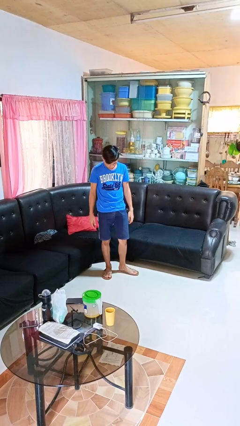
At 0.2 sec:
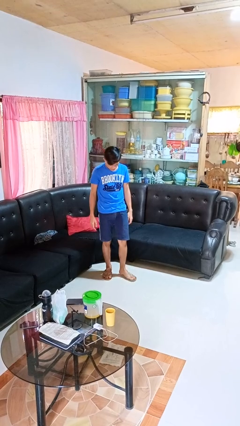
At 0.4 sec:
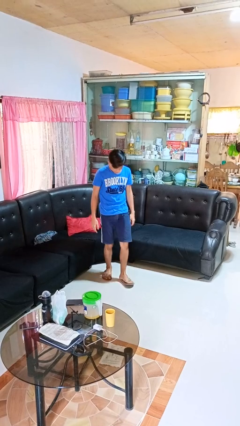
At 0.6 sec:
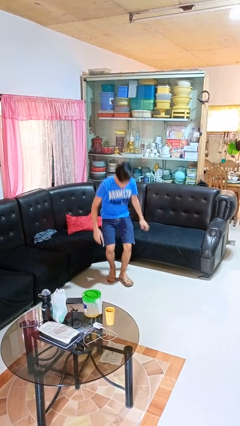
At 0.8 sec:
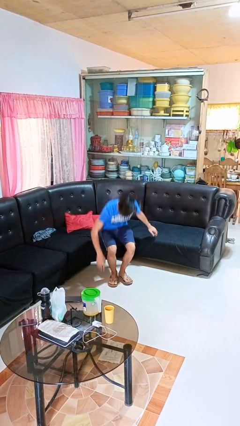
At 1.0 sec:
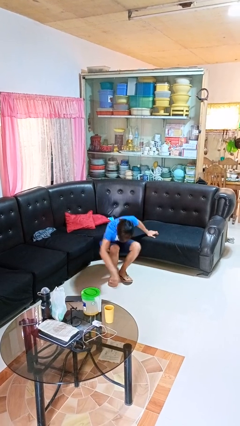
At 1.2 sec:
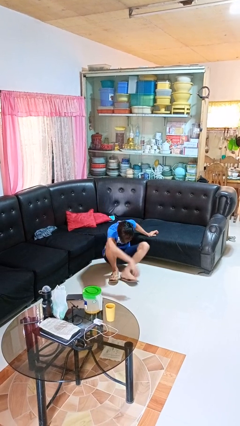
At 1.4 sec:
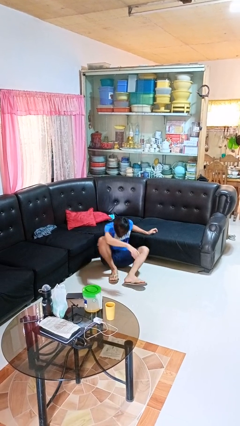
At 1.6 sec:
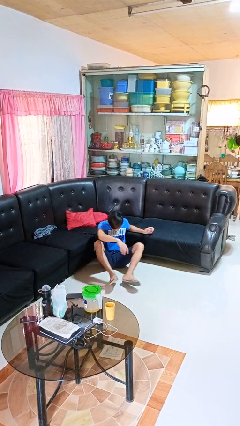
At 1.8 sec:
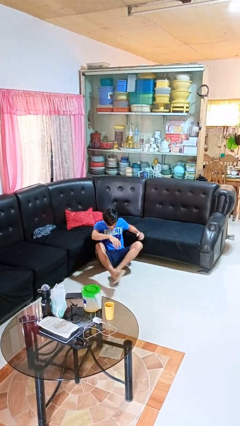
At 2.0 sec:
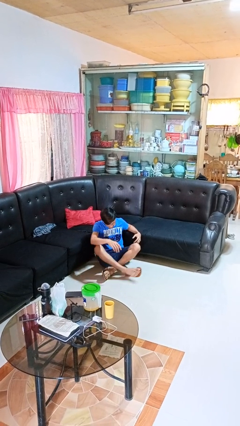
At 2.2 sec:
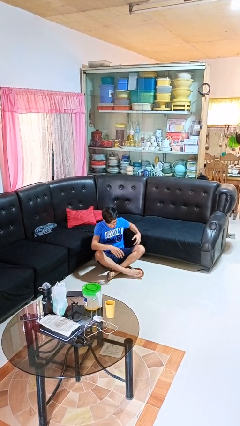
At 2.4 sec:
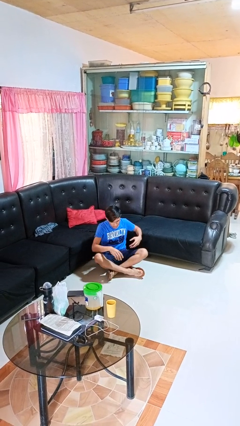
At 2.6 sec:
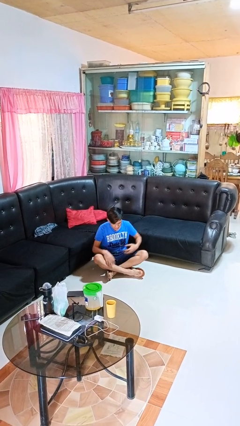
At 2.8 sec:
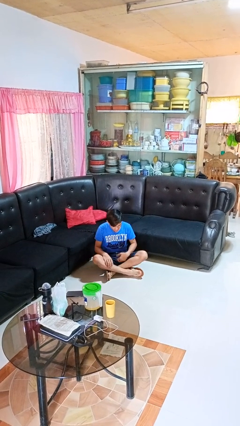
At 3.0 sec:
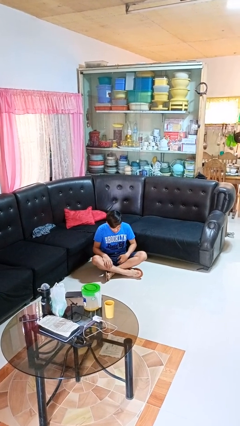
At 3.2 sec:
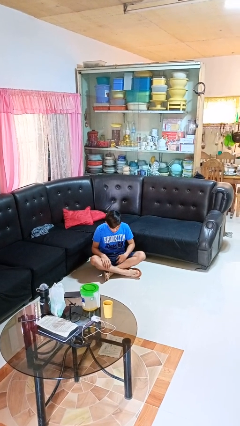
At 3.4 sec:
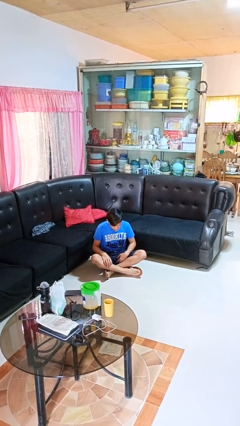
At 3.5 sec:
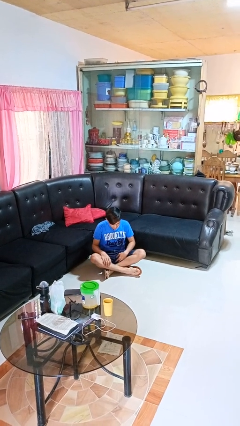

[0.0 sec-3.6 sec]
person sits crisscross

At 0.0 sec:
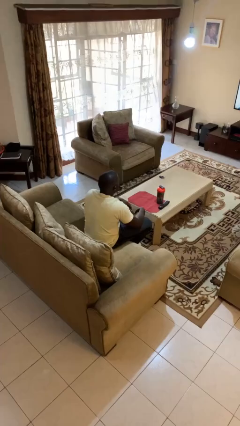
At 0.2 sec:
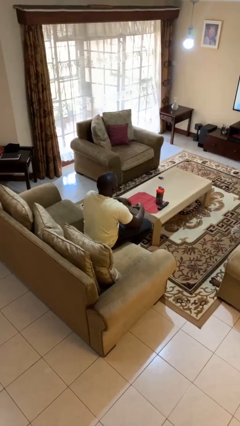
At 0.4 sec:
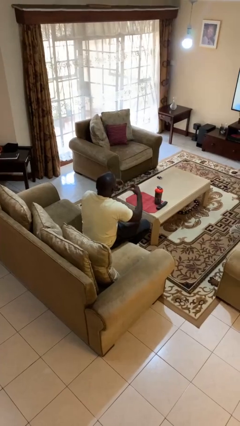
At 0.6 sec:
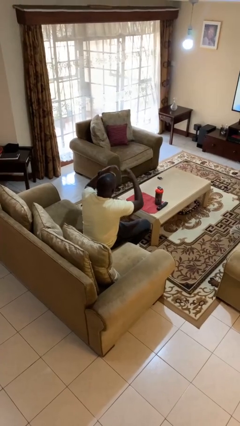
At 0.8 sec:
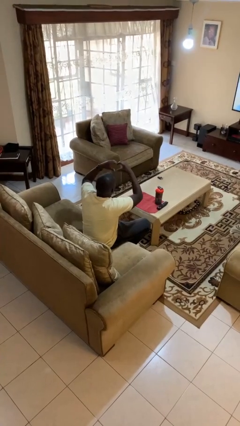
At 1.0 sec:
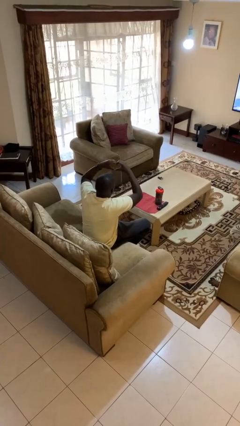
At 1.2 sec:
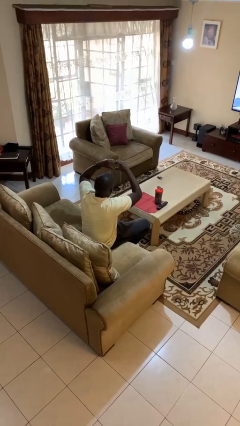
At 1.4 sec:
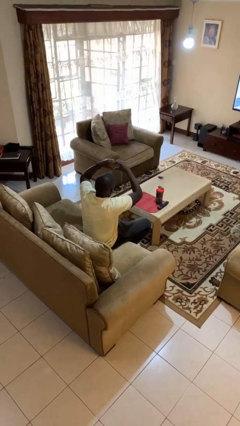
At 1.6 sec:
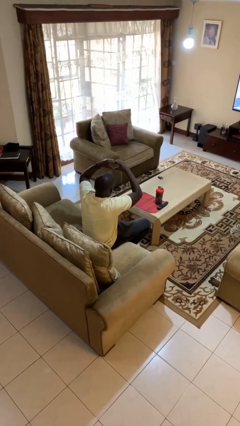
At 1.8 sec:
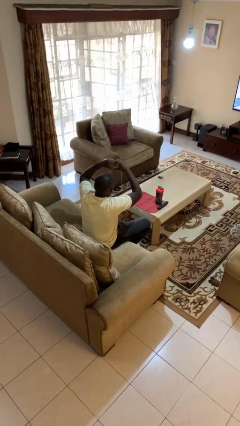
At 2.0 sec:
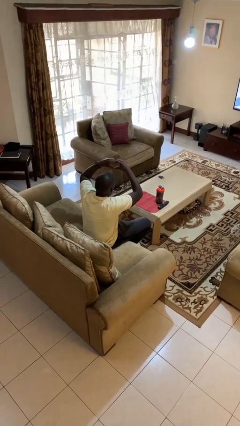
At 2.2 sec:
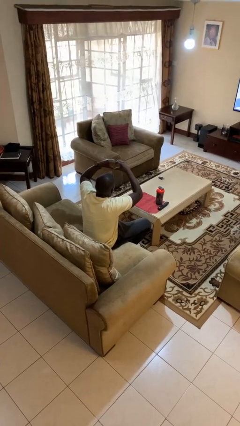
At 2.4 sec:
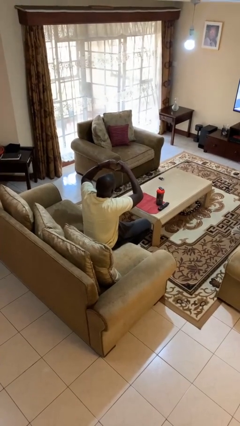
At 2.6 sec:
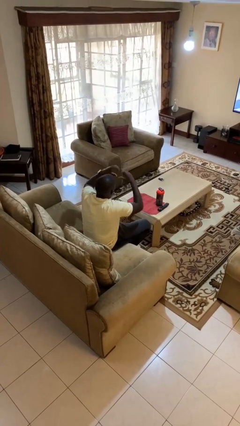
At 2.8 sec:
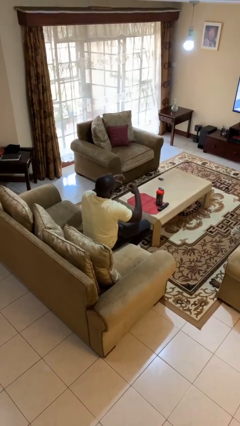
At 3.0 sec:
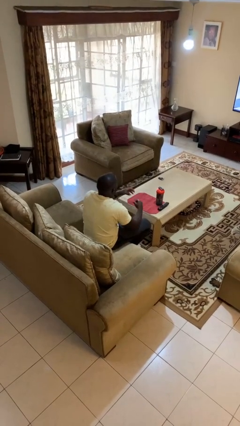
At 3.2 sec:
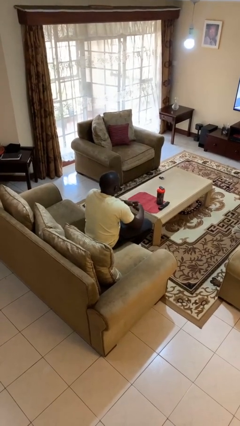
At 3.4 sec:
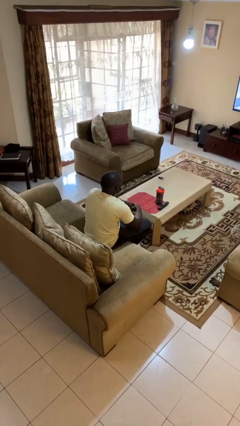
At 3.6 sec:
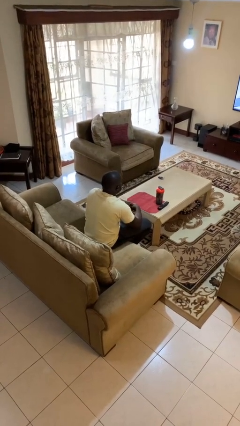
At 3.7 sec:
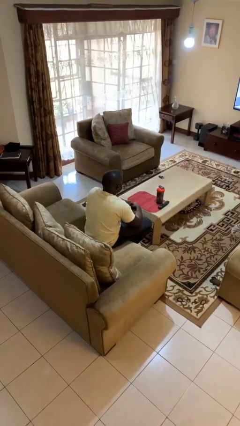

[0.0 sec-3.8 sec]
person gestures heart

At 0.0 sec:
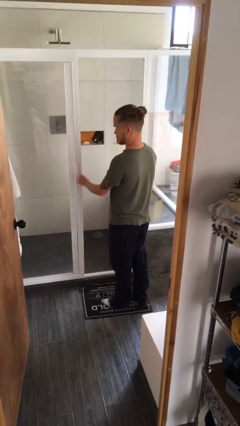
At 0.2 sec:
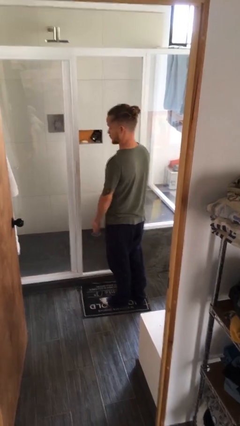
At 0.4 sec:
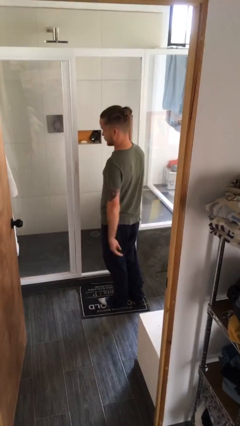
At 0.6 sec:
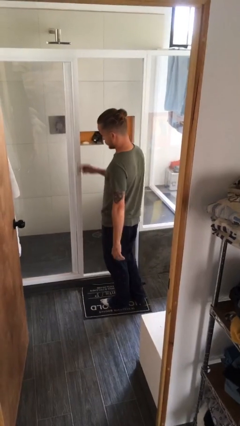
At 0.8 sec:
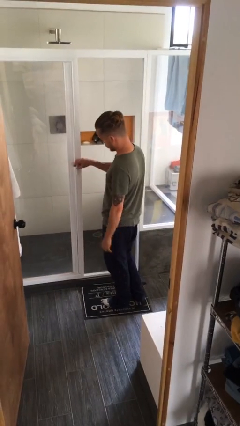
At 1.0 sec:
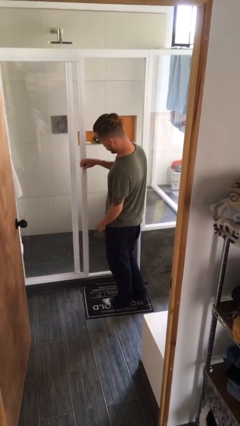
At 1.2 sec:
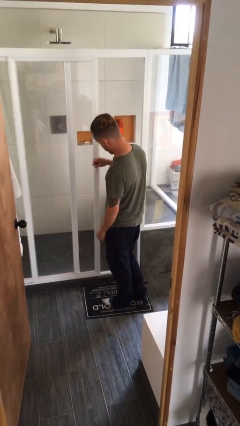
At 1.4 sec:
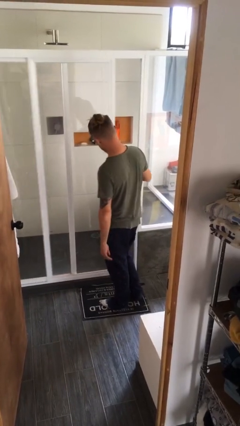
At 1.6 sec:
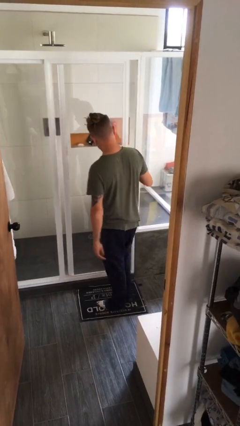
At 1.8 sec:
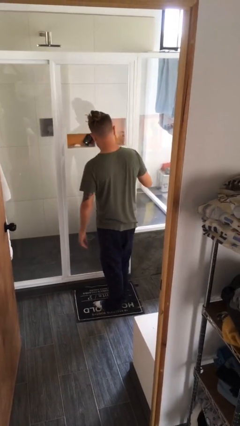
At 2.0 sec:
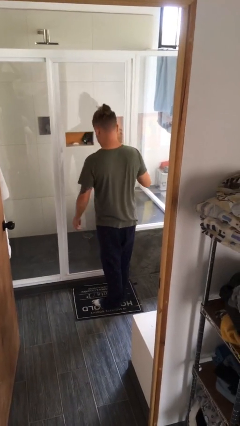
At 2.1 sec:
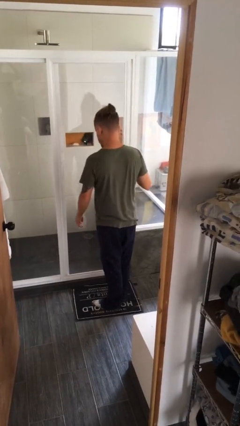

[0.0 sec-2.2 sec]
person closes sliding door

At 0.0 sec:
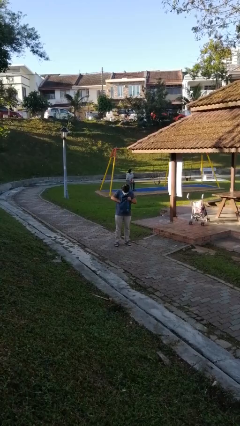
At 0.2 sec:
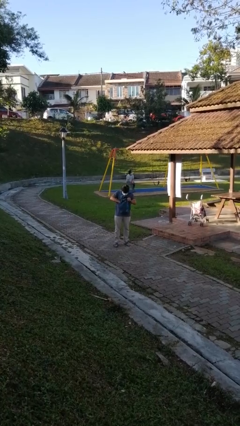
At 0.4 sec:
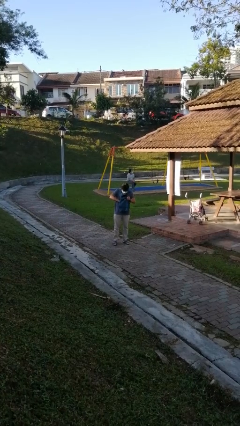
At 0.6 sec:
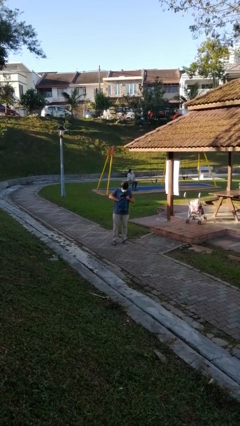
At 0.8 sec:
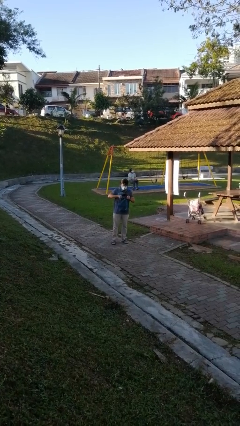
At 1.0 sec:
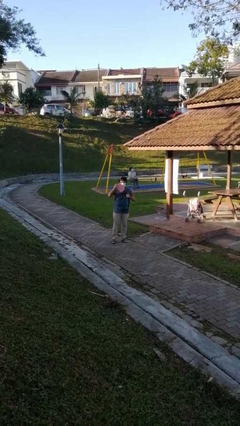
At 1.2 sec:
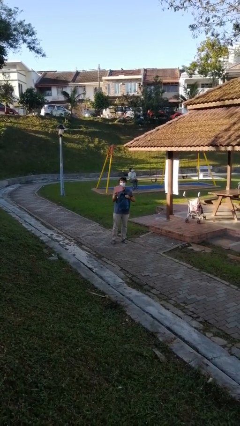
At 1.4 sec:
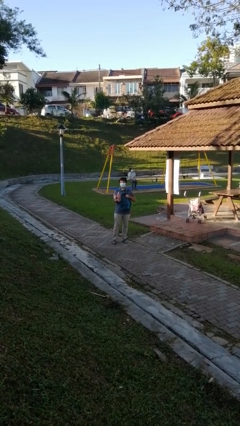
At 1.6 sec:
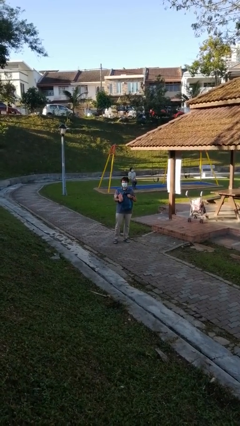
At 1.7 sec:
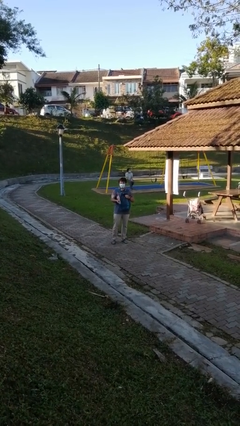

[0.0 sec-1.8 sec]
person takes object from backpack

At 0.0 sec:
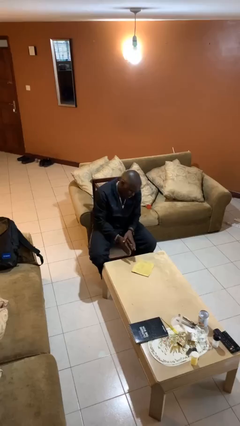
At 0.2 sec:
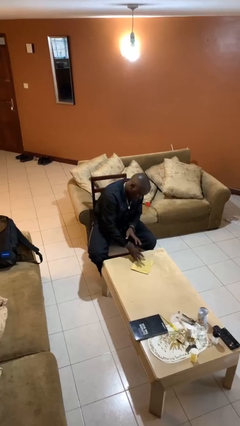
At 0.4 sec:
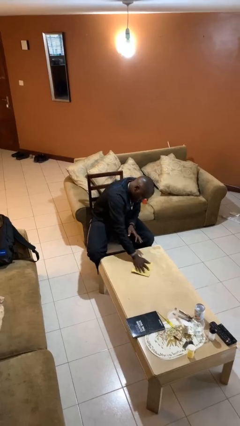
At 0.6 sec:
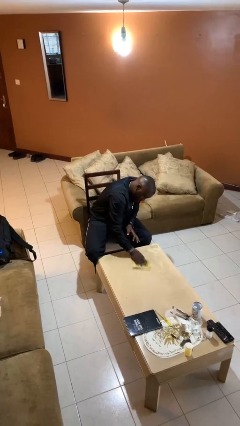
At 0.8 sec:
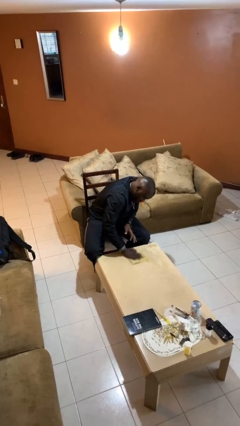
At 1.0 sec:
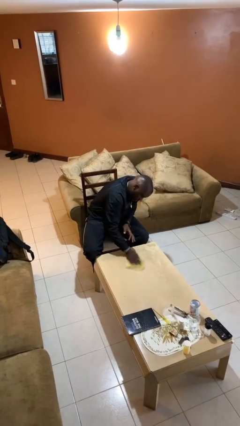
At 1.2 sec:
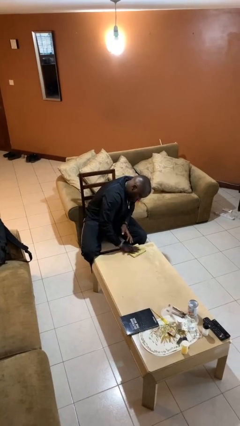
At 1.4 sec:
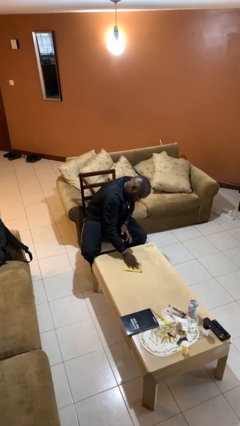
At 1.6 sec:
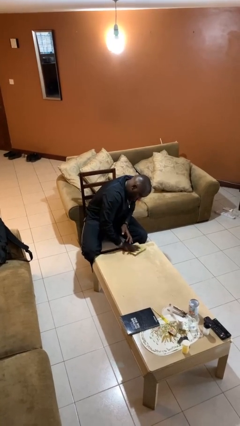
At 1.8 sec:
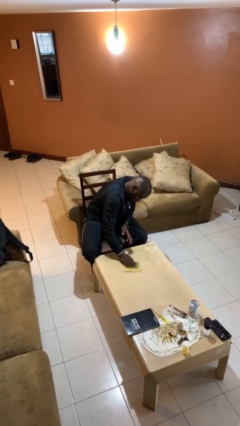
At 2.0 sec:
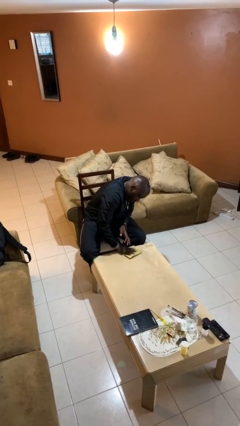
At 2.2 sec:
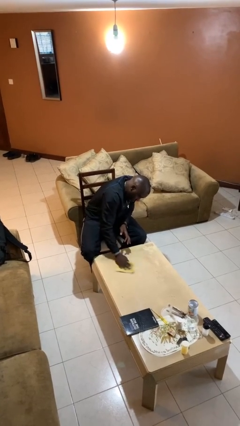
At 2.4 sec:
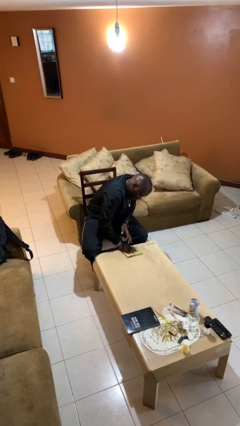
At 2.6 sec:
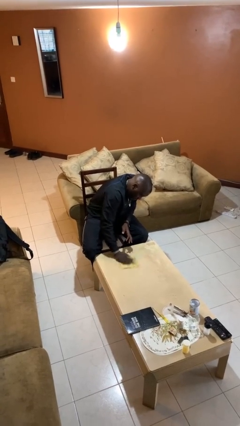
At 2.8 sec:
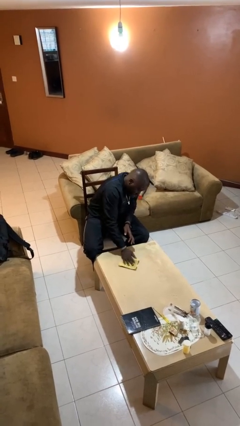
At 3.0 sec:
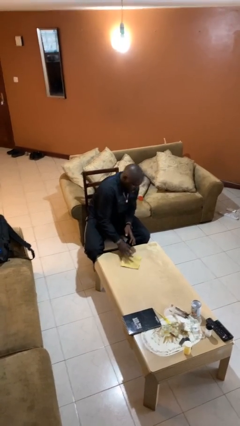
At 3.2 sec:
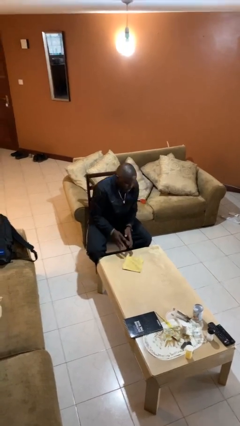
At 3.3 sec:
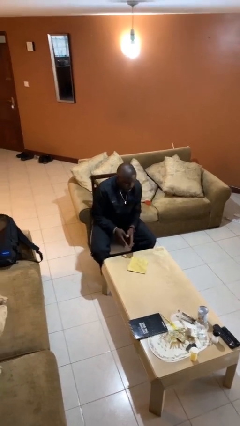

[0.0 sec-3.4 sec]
person cleans table with rag

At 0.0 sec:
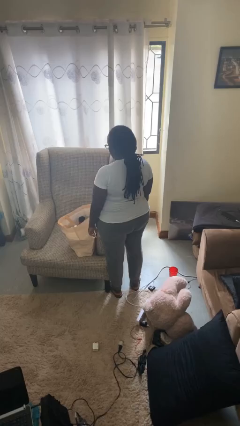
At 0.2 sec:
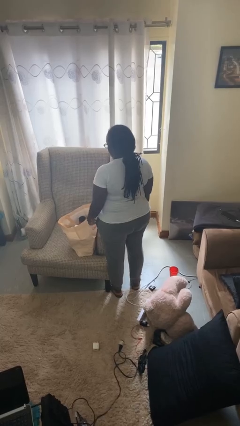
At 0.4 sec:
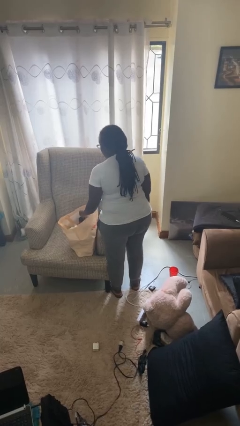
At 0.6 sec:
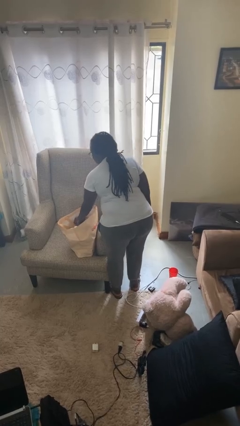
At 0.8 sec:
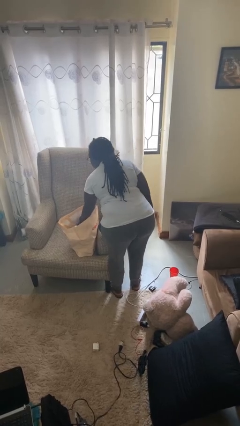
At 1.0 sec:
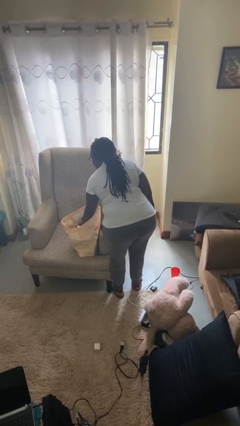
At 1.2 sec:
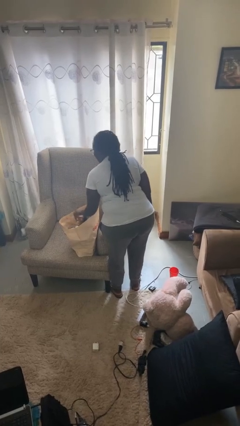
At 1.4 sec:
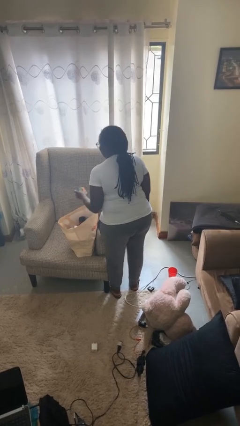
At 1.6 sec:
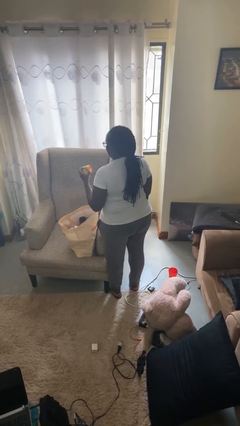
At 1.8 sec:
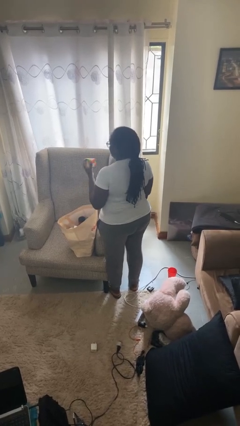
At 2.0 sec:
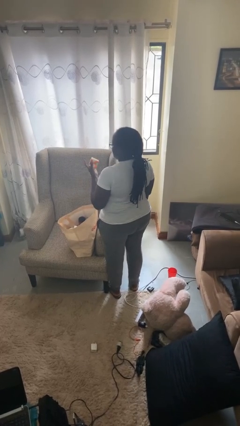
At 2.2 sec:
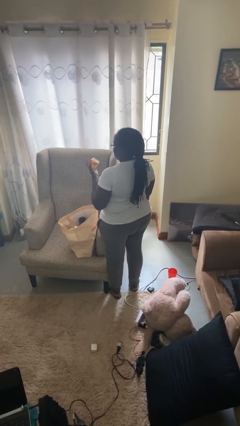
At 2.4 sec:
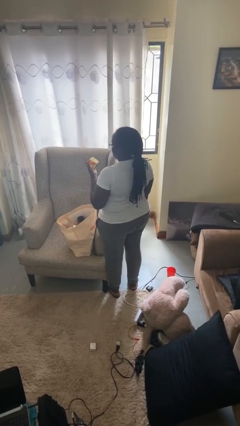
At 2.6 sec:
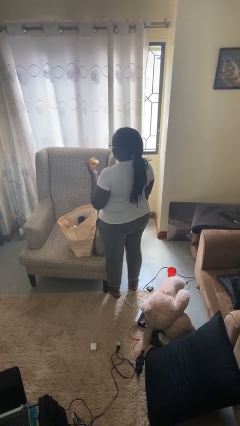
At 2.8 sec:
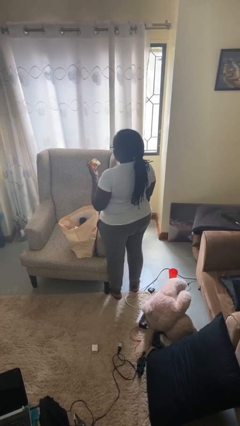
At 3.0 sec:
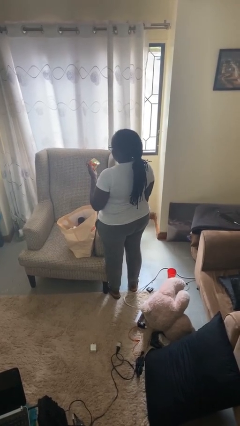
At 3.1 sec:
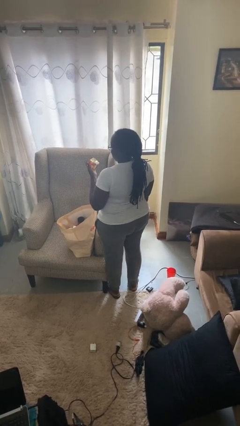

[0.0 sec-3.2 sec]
person takes object from bag
